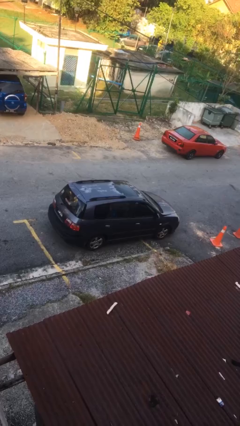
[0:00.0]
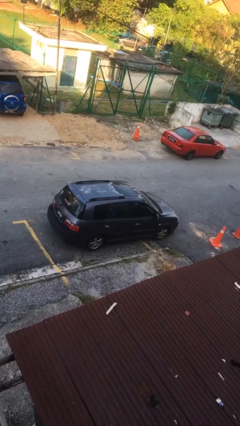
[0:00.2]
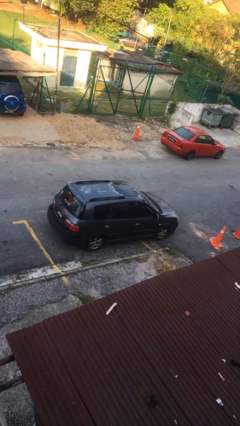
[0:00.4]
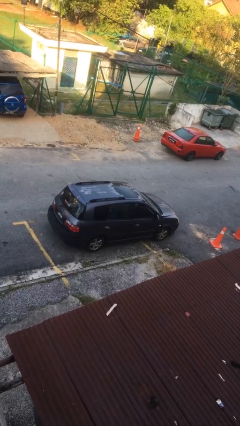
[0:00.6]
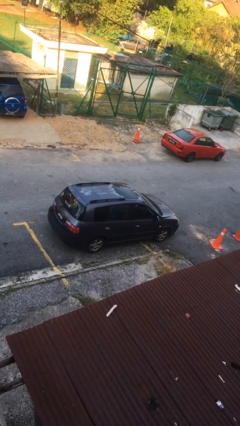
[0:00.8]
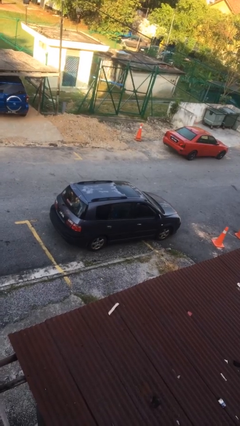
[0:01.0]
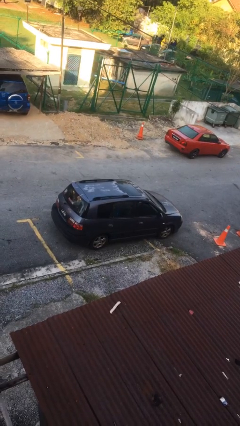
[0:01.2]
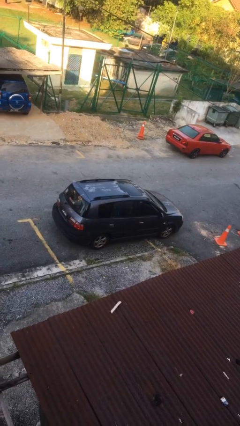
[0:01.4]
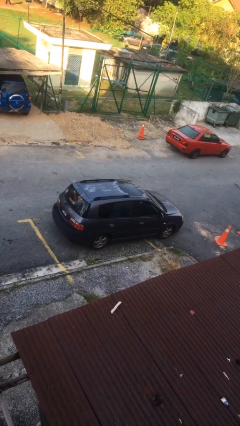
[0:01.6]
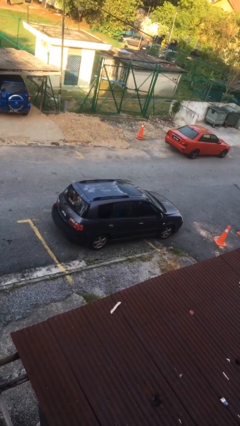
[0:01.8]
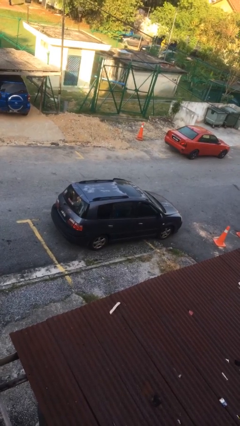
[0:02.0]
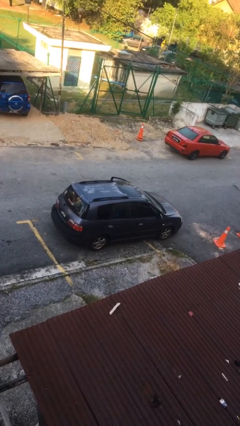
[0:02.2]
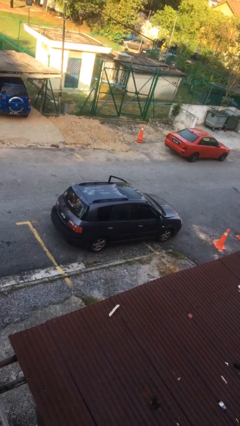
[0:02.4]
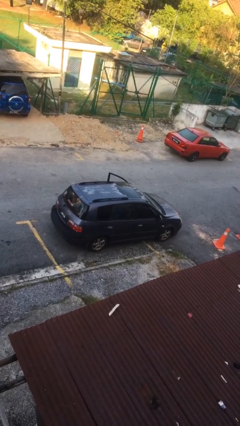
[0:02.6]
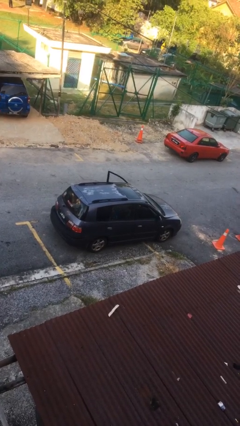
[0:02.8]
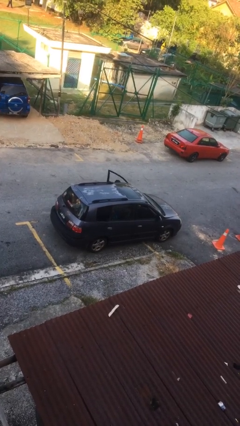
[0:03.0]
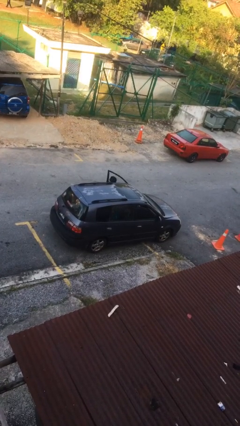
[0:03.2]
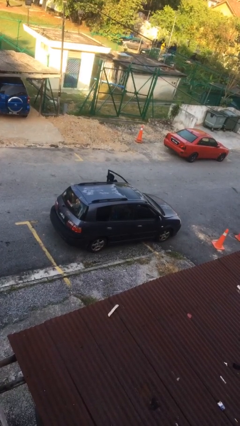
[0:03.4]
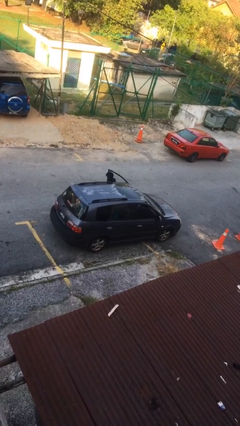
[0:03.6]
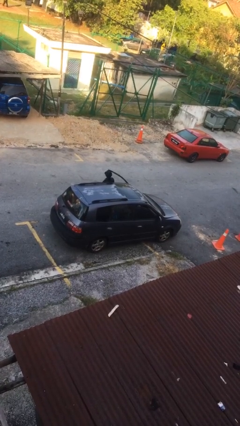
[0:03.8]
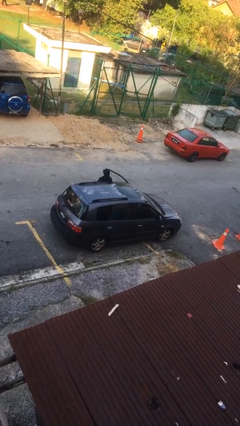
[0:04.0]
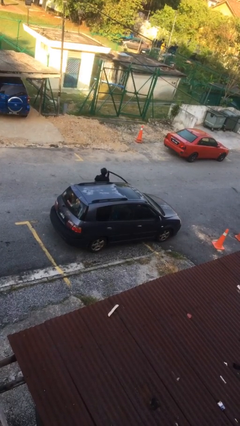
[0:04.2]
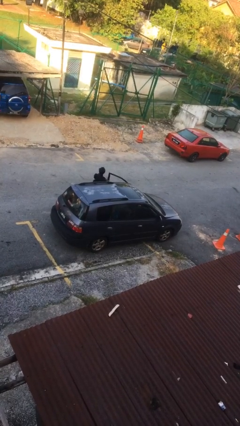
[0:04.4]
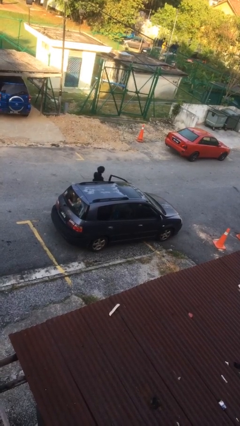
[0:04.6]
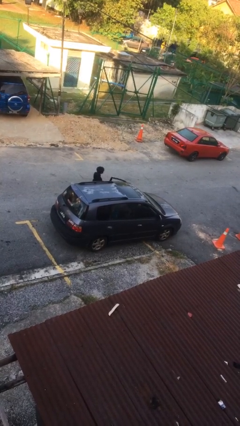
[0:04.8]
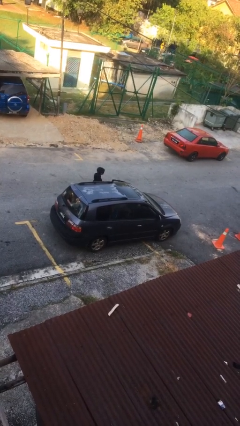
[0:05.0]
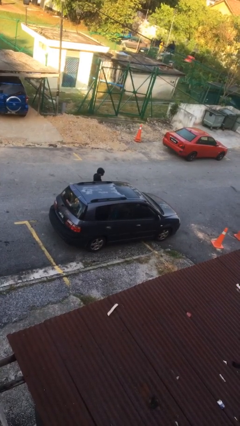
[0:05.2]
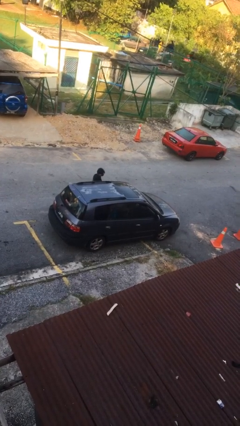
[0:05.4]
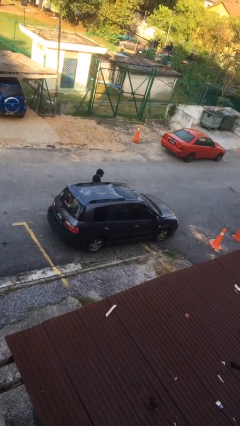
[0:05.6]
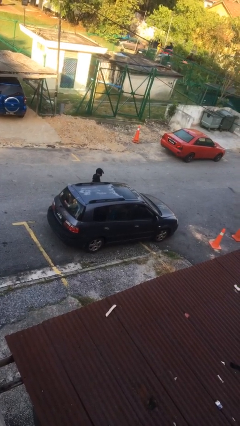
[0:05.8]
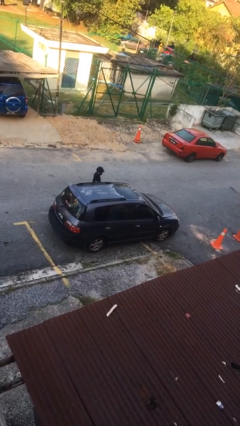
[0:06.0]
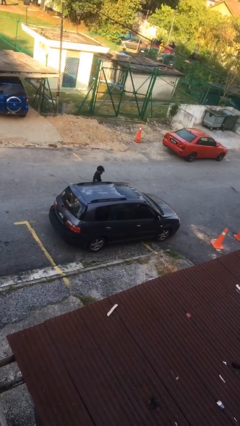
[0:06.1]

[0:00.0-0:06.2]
car drops off person

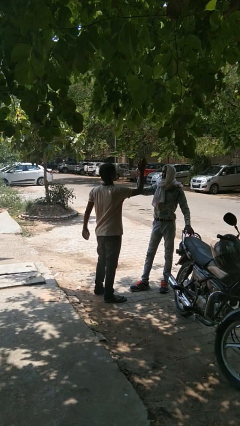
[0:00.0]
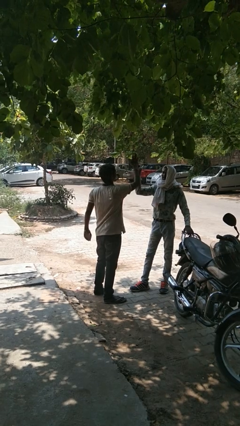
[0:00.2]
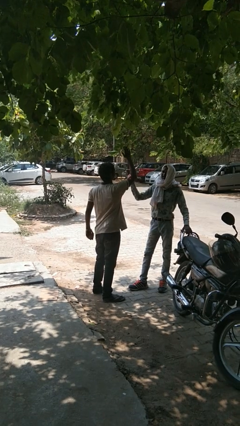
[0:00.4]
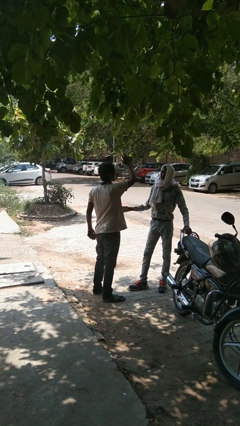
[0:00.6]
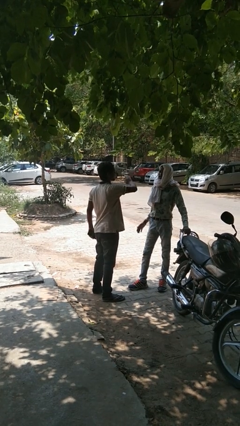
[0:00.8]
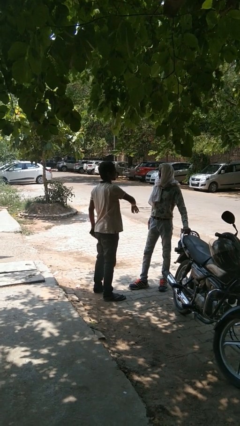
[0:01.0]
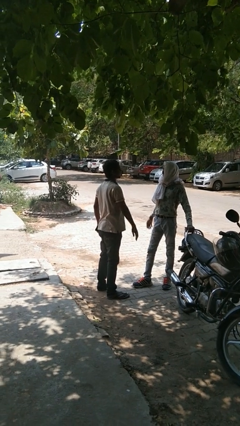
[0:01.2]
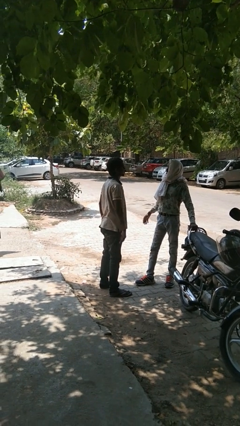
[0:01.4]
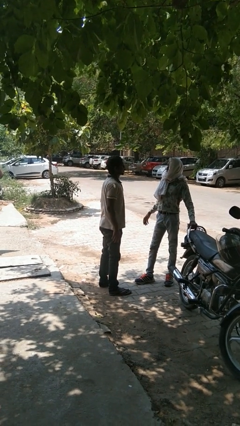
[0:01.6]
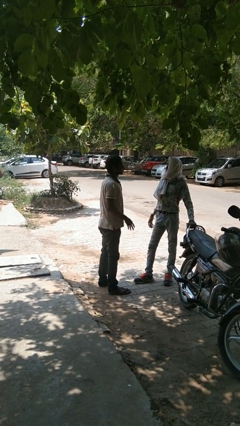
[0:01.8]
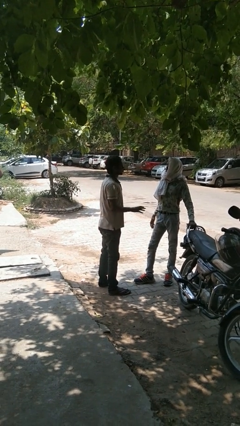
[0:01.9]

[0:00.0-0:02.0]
person highfives hand

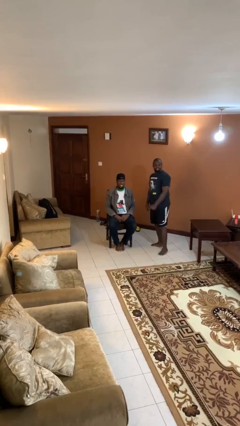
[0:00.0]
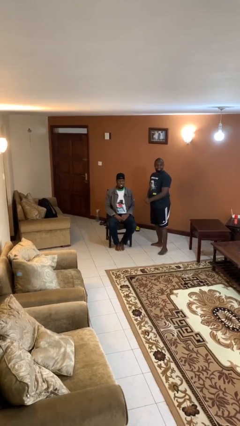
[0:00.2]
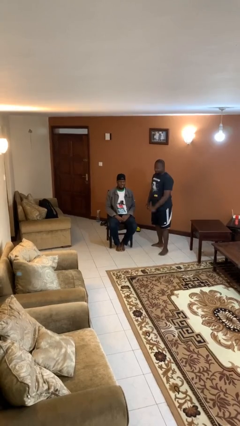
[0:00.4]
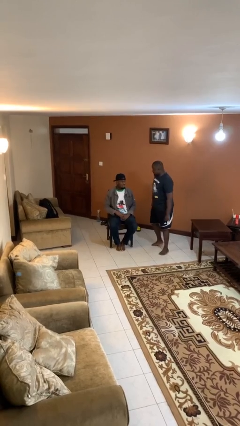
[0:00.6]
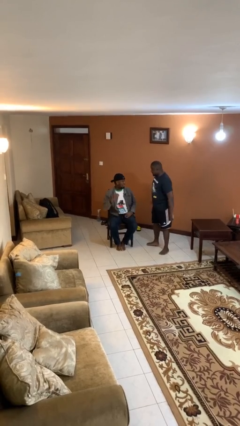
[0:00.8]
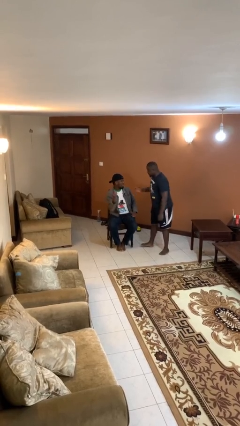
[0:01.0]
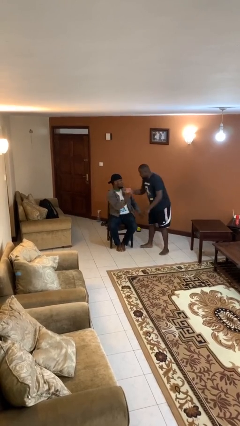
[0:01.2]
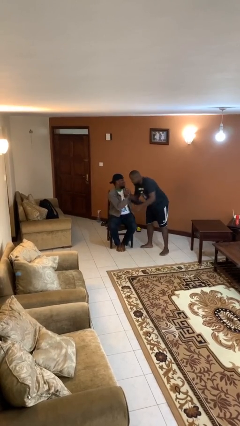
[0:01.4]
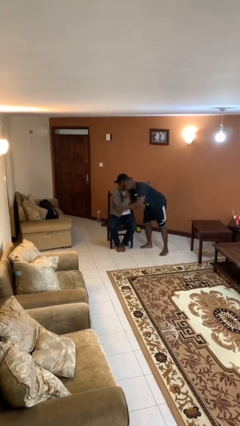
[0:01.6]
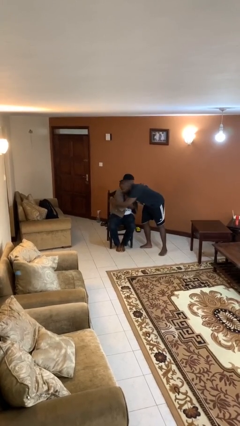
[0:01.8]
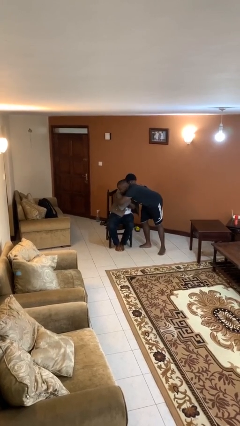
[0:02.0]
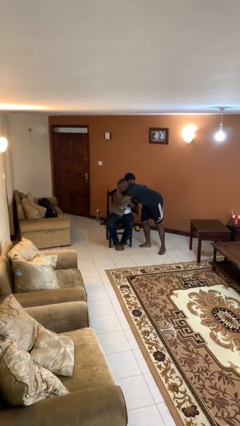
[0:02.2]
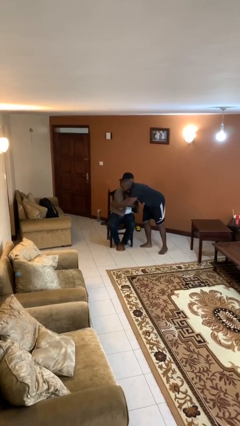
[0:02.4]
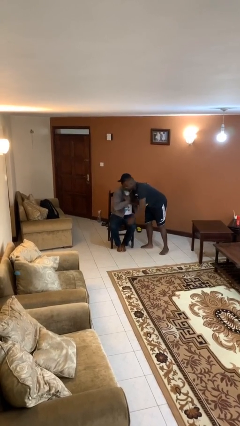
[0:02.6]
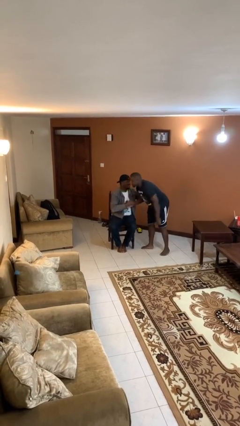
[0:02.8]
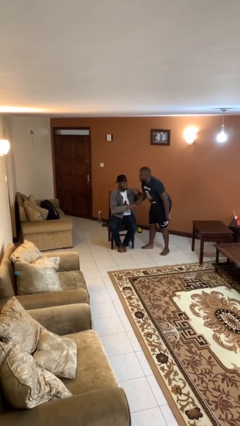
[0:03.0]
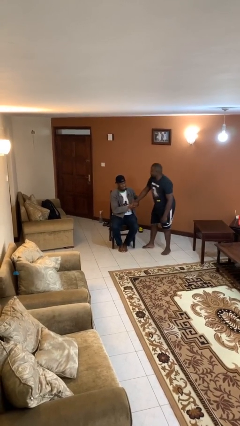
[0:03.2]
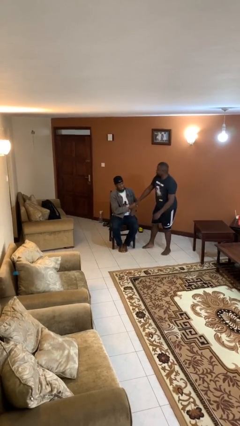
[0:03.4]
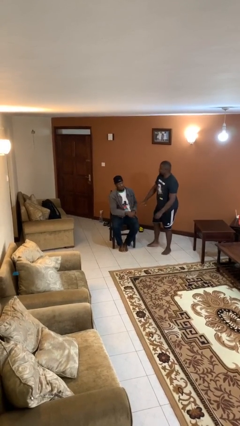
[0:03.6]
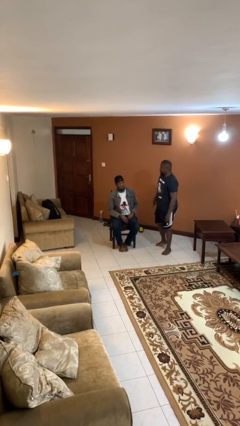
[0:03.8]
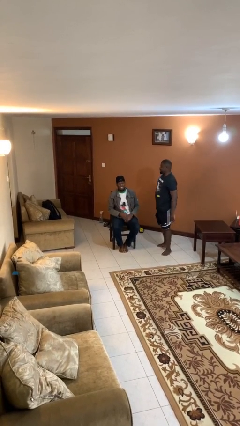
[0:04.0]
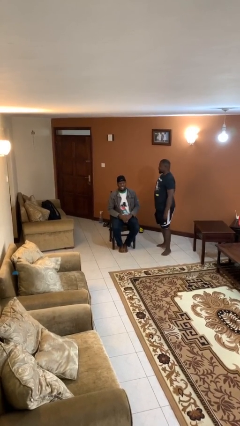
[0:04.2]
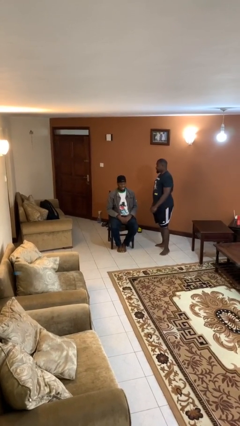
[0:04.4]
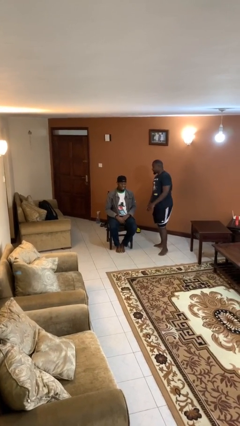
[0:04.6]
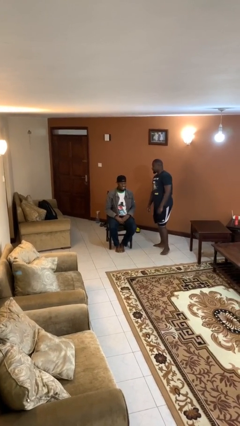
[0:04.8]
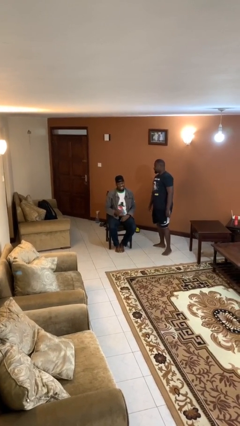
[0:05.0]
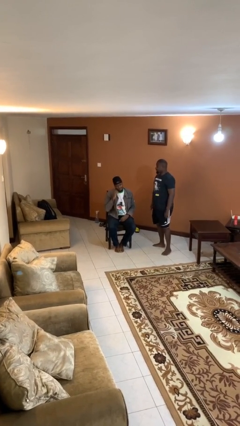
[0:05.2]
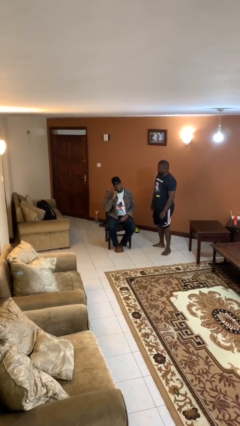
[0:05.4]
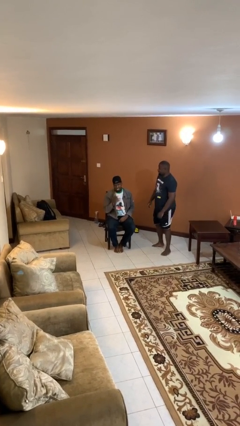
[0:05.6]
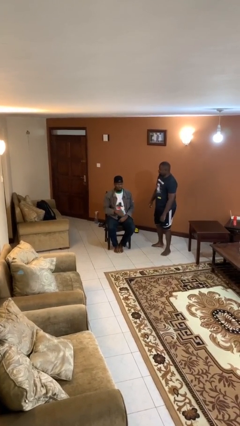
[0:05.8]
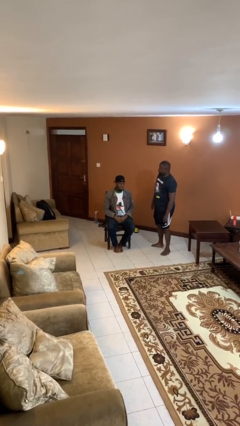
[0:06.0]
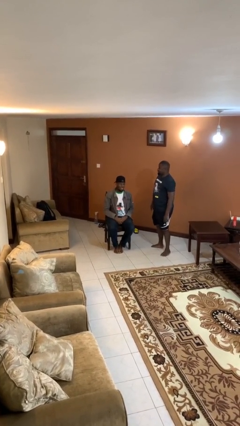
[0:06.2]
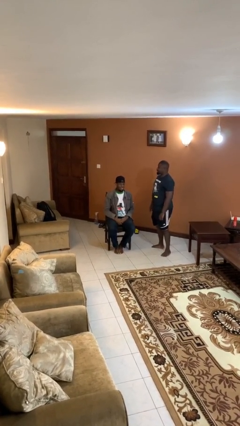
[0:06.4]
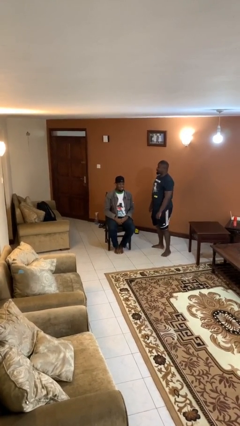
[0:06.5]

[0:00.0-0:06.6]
person embraces person

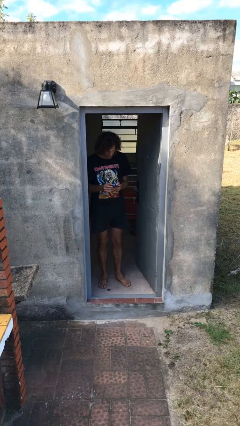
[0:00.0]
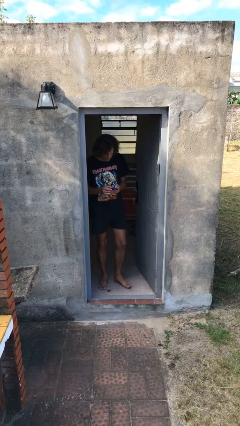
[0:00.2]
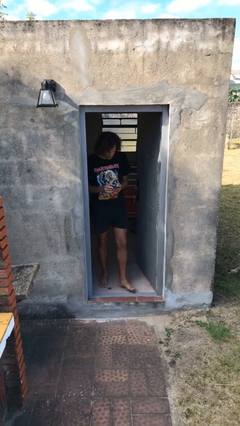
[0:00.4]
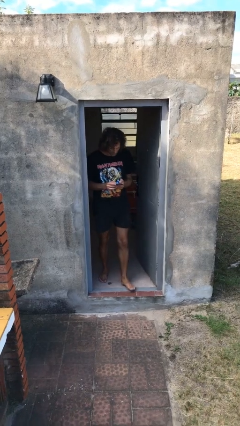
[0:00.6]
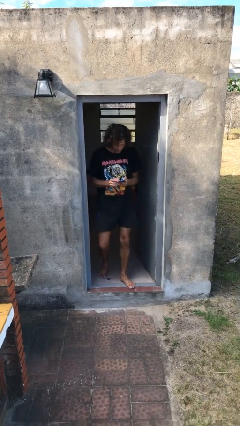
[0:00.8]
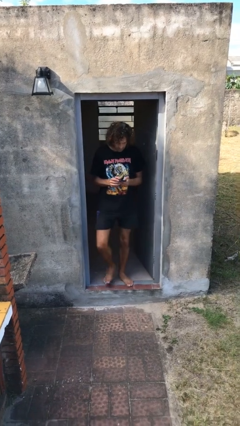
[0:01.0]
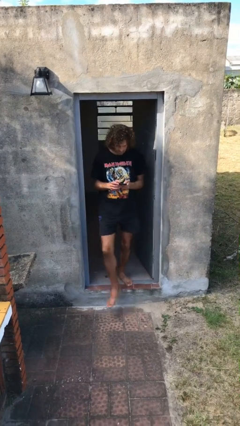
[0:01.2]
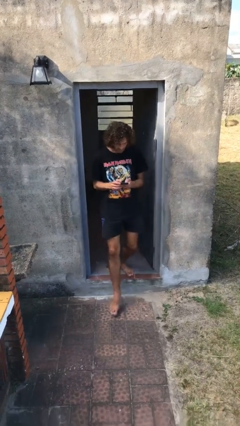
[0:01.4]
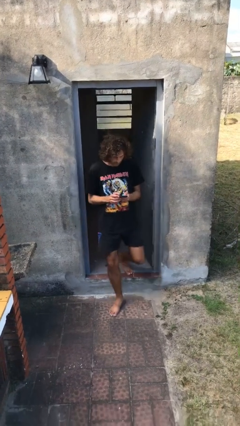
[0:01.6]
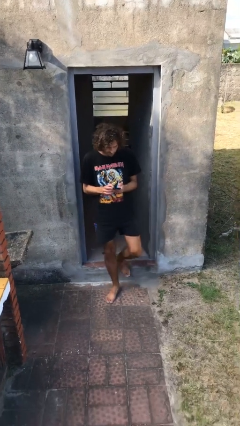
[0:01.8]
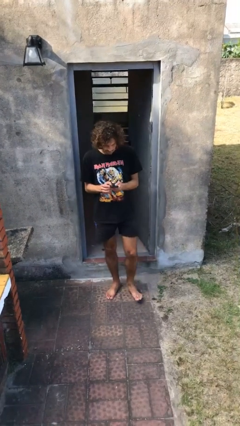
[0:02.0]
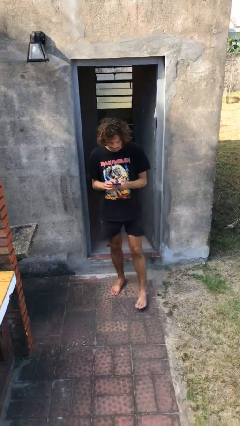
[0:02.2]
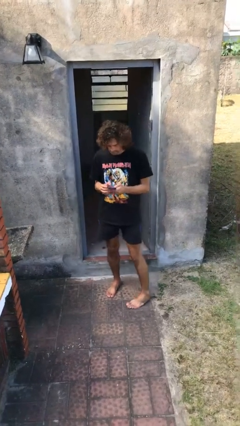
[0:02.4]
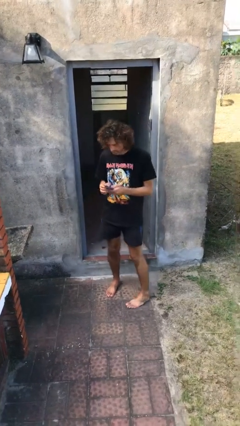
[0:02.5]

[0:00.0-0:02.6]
person enters scene through structure
